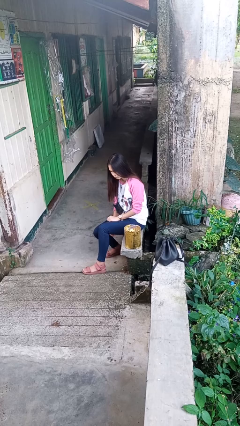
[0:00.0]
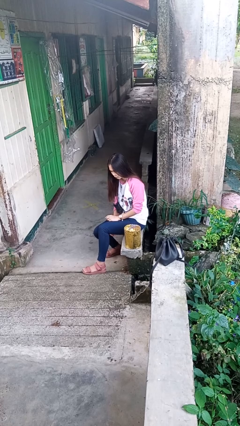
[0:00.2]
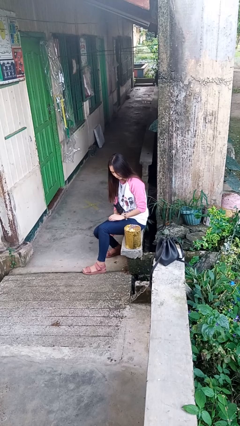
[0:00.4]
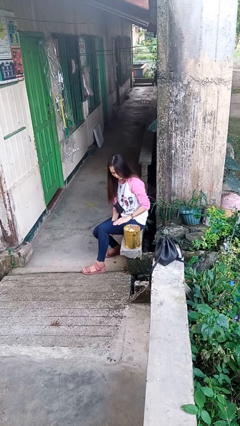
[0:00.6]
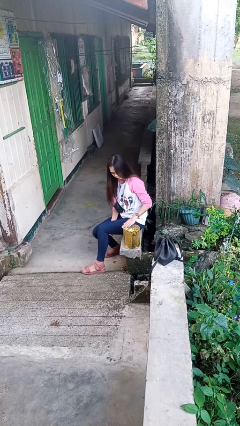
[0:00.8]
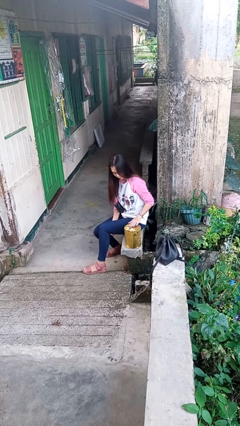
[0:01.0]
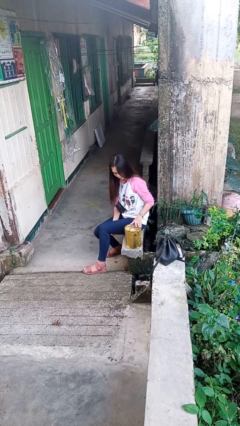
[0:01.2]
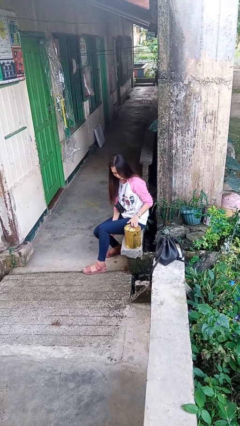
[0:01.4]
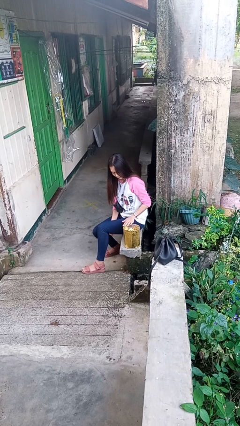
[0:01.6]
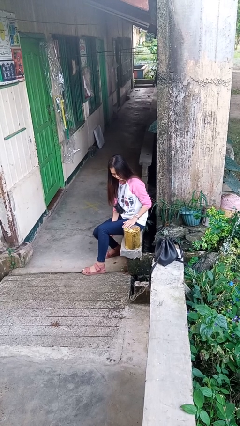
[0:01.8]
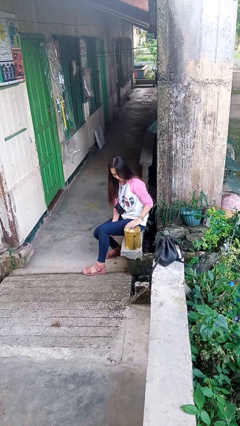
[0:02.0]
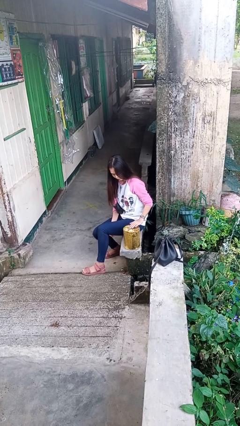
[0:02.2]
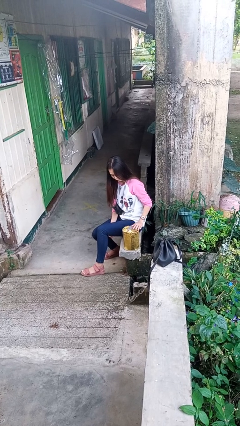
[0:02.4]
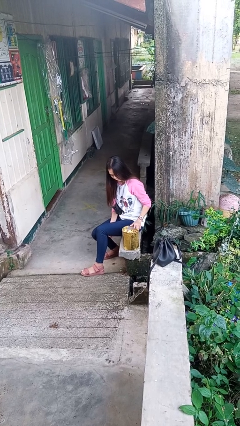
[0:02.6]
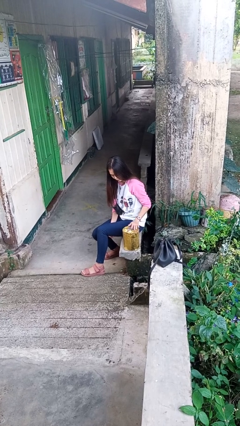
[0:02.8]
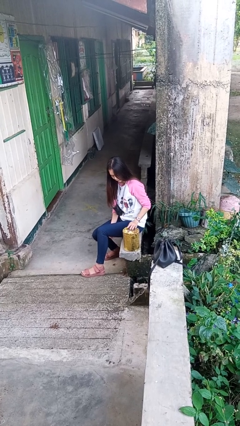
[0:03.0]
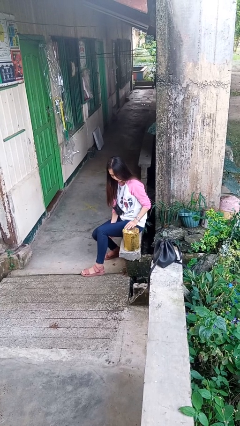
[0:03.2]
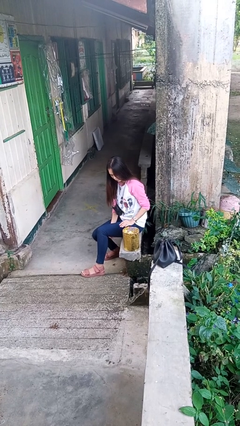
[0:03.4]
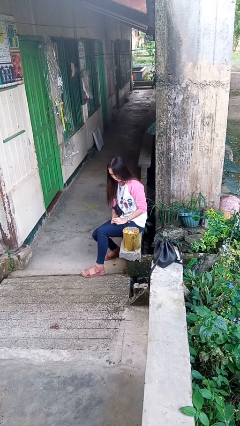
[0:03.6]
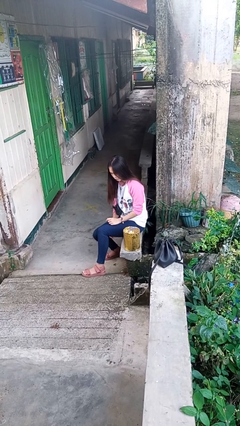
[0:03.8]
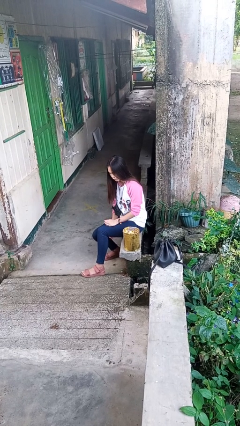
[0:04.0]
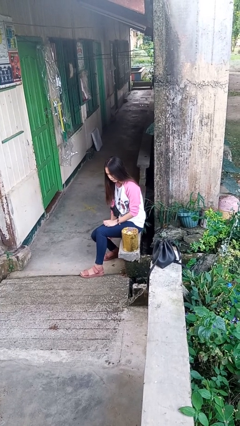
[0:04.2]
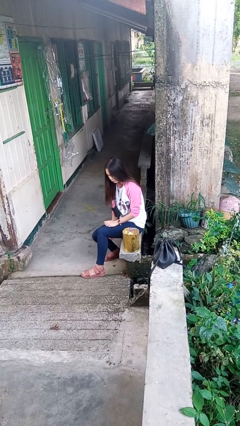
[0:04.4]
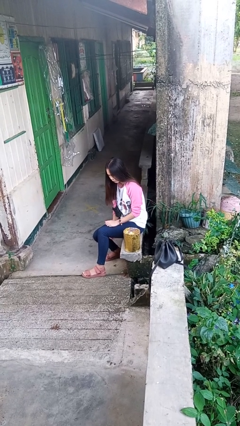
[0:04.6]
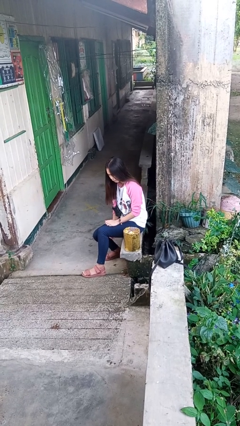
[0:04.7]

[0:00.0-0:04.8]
person waves hand over object

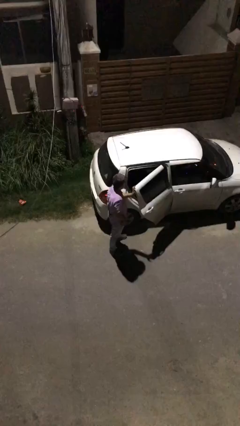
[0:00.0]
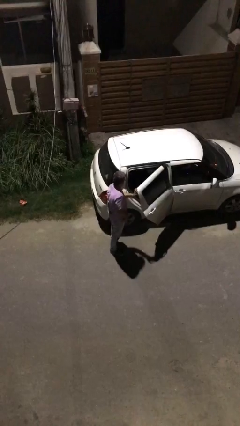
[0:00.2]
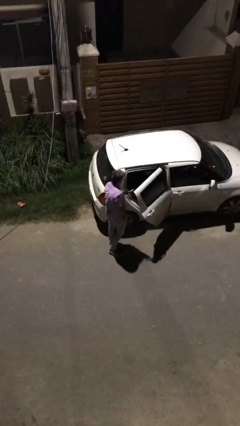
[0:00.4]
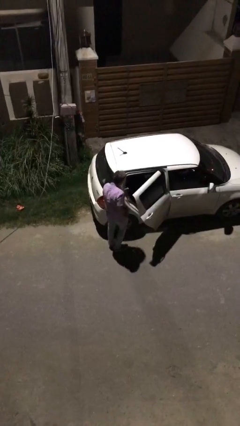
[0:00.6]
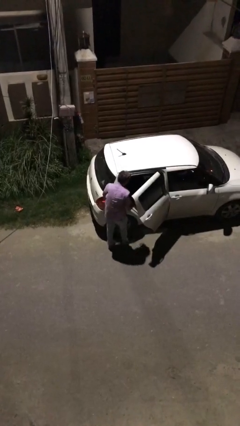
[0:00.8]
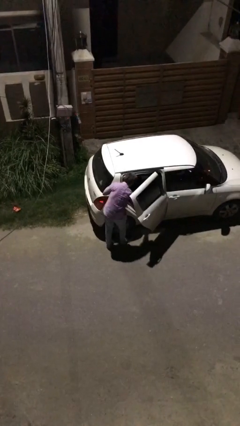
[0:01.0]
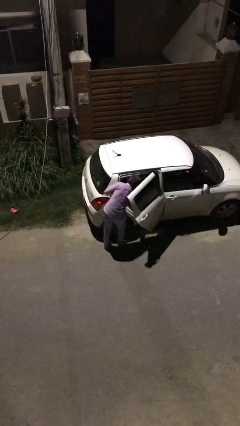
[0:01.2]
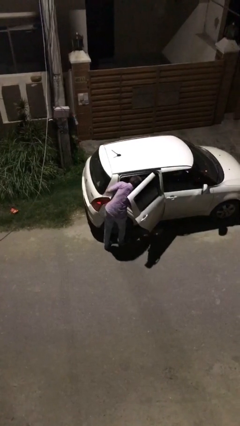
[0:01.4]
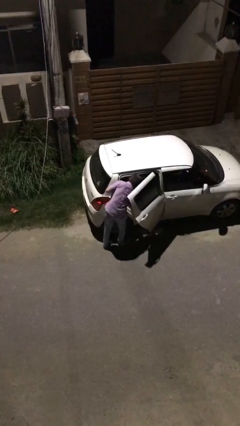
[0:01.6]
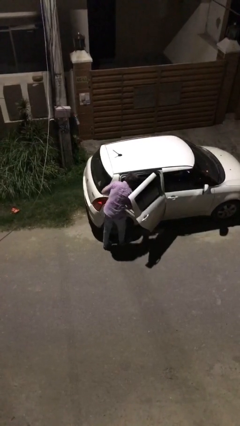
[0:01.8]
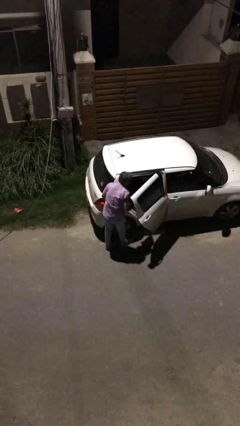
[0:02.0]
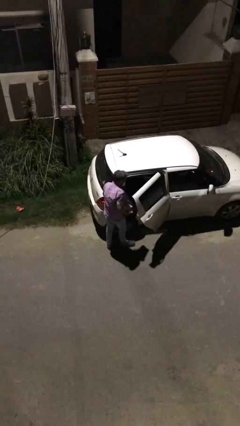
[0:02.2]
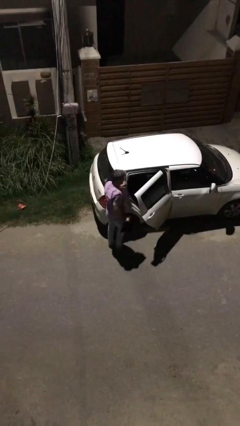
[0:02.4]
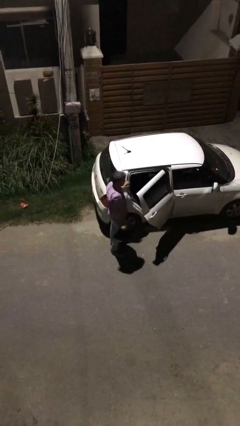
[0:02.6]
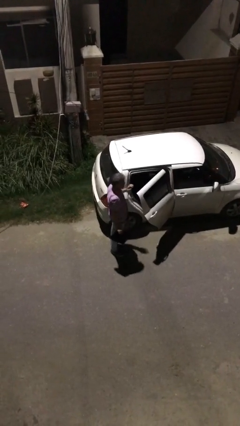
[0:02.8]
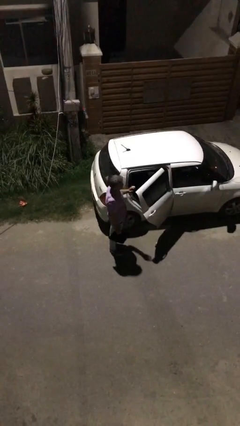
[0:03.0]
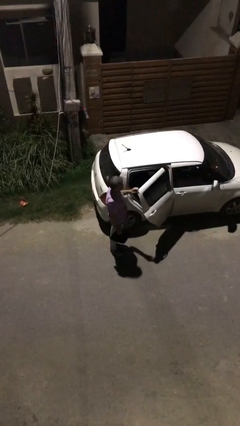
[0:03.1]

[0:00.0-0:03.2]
person unloads car

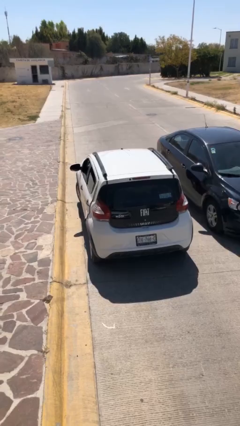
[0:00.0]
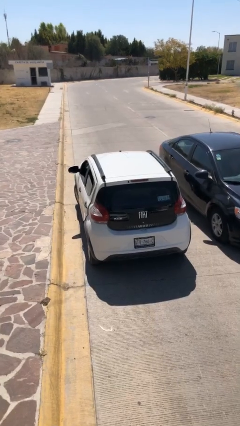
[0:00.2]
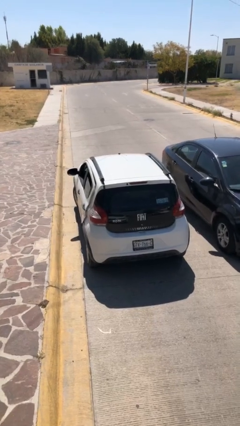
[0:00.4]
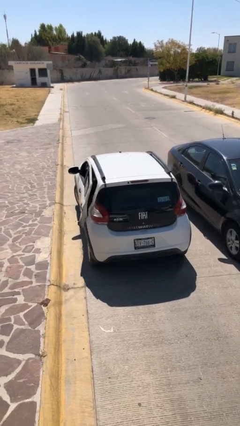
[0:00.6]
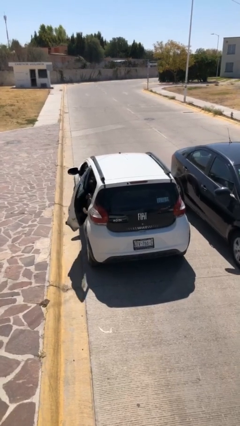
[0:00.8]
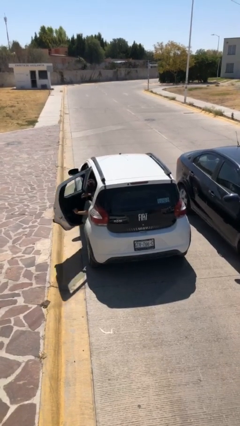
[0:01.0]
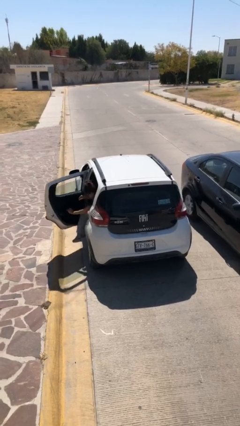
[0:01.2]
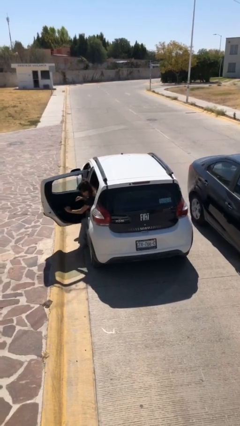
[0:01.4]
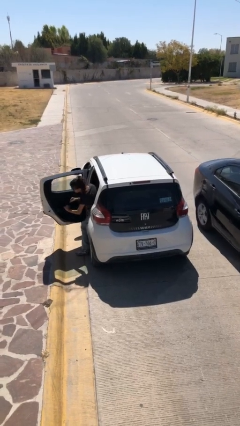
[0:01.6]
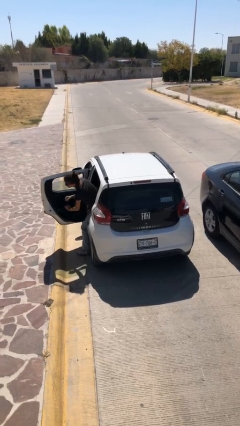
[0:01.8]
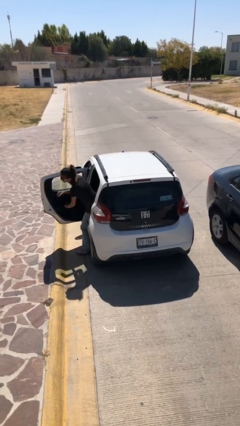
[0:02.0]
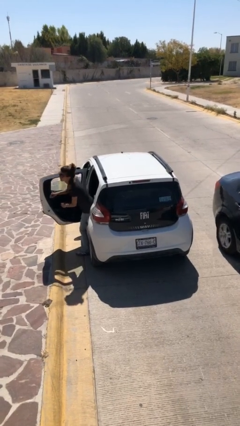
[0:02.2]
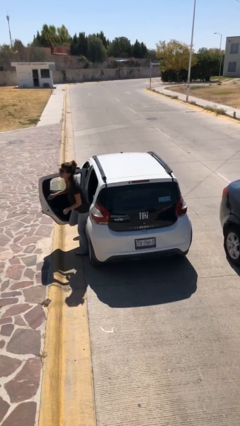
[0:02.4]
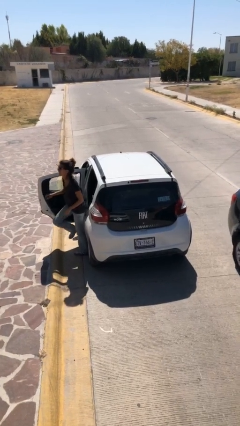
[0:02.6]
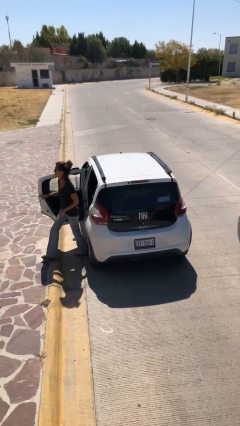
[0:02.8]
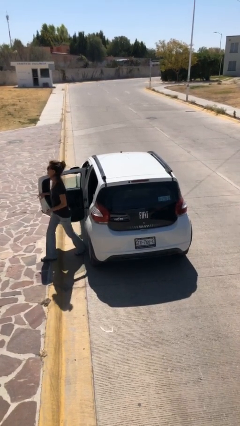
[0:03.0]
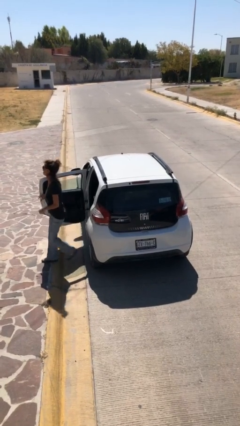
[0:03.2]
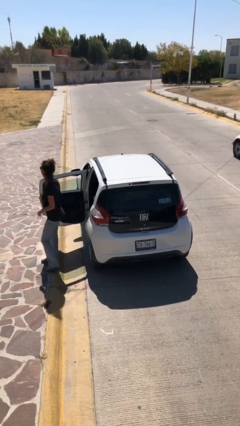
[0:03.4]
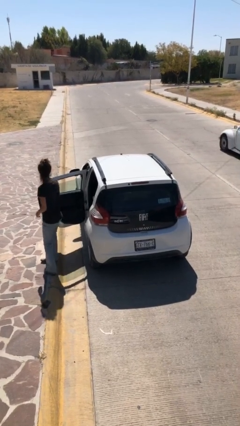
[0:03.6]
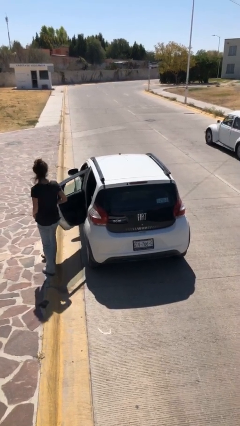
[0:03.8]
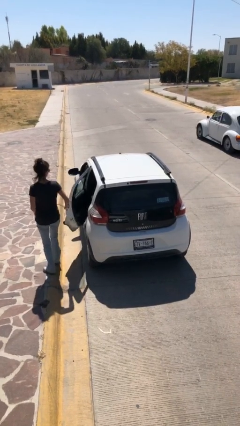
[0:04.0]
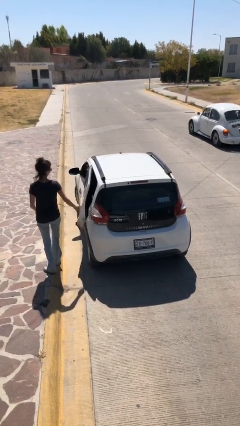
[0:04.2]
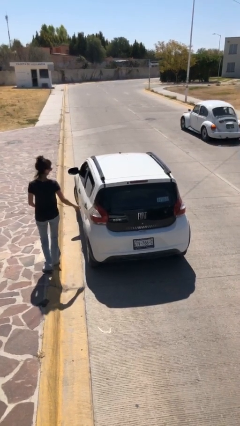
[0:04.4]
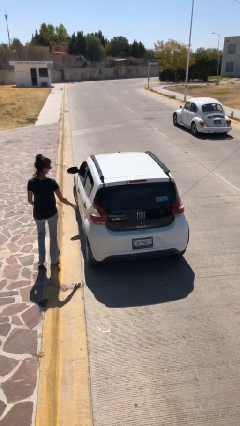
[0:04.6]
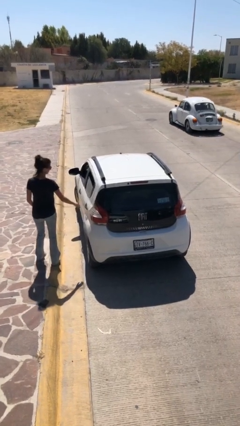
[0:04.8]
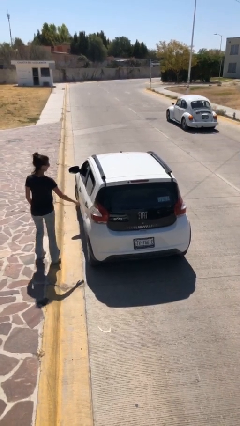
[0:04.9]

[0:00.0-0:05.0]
car drops off person

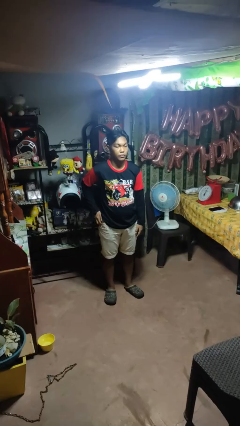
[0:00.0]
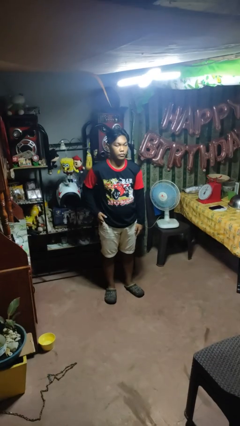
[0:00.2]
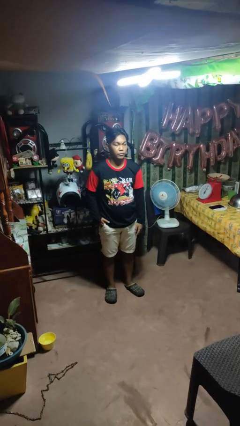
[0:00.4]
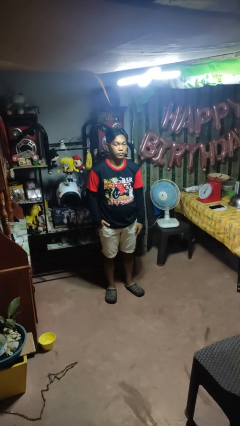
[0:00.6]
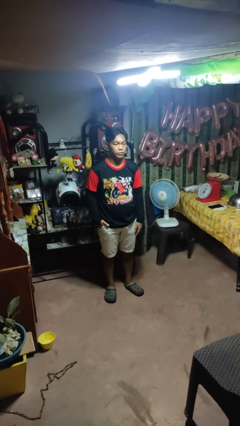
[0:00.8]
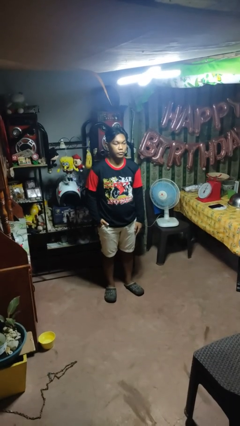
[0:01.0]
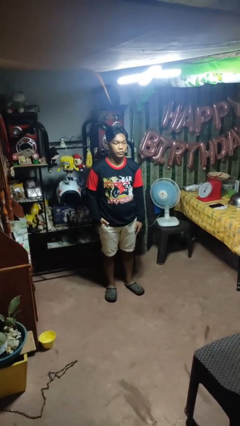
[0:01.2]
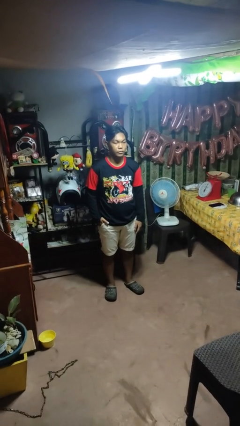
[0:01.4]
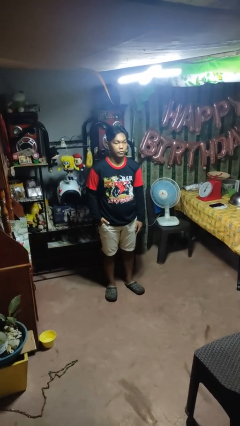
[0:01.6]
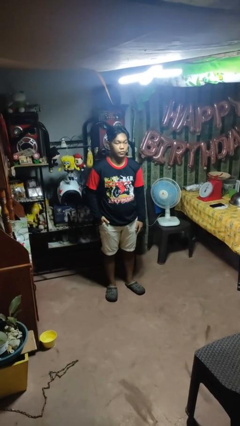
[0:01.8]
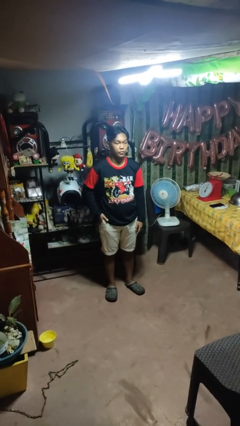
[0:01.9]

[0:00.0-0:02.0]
person puts hands in back pockets

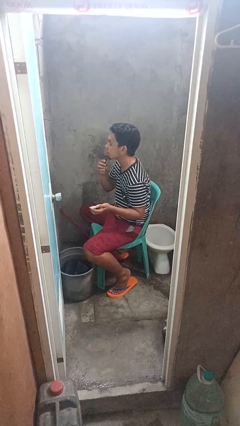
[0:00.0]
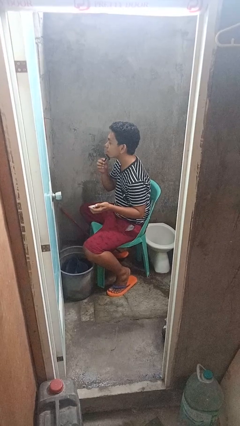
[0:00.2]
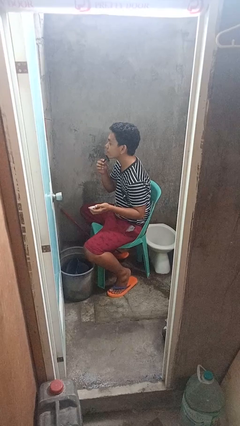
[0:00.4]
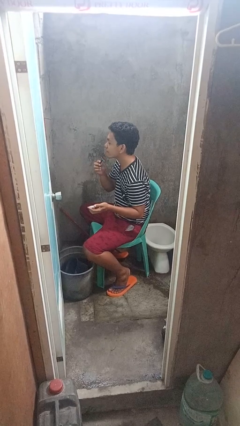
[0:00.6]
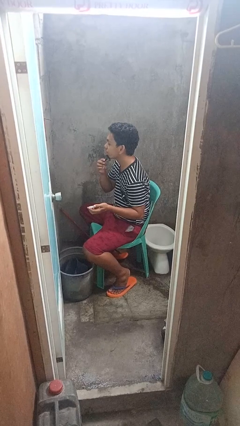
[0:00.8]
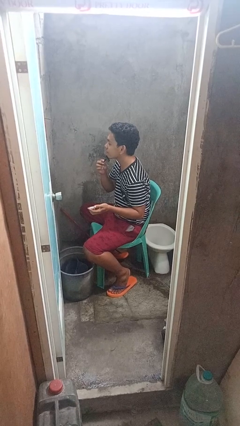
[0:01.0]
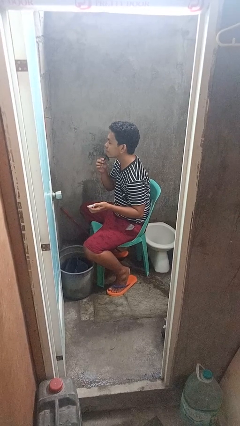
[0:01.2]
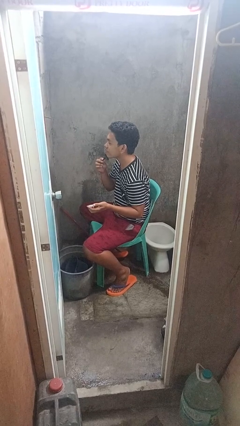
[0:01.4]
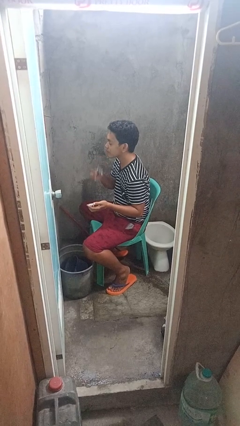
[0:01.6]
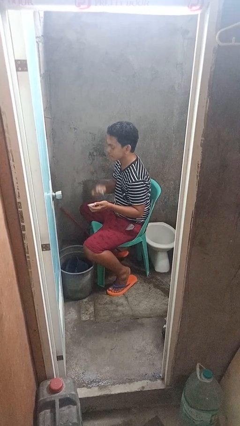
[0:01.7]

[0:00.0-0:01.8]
person shaves face

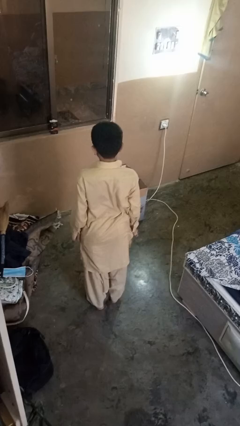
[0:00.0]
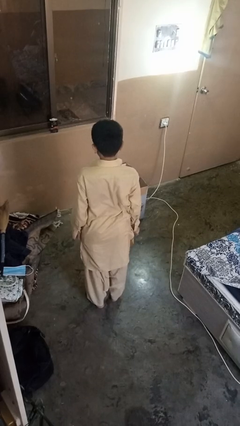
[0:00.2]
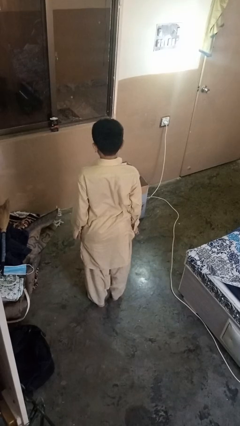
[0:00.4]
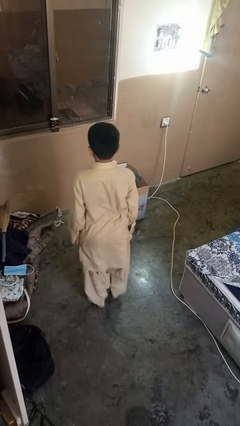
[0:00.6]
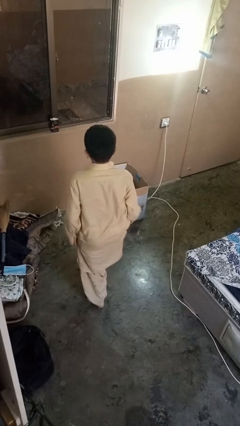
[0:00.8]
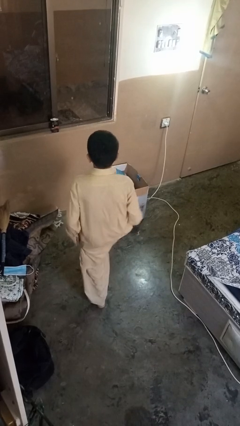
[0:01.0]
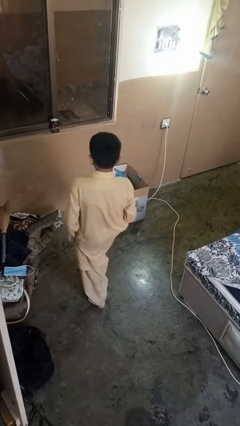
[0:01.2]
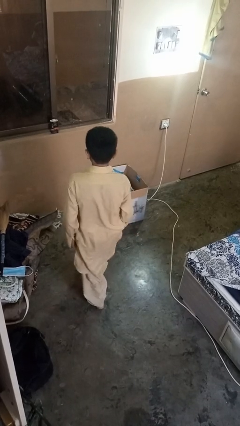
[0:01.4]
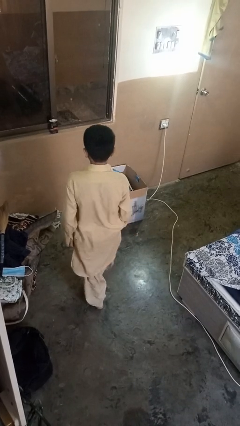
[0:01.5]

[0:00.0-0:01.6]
person karate kicks
